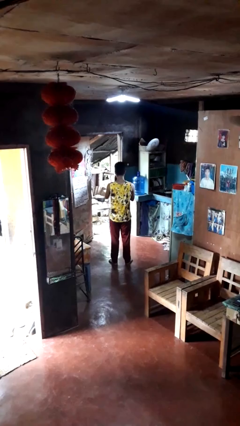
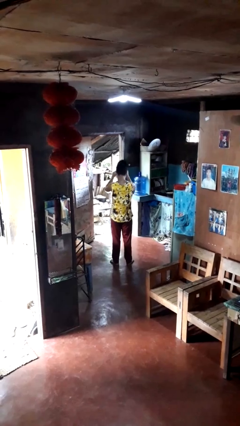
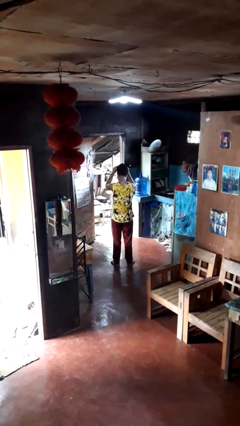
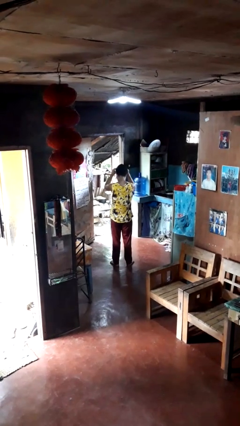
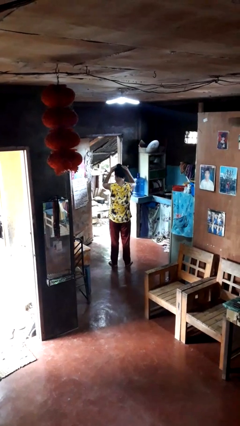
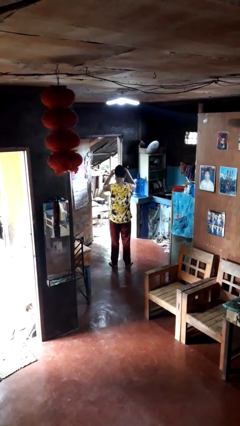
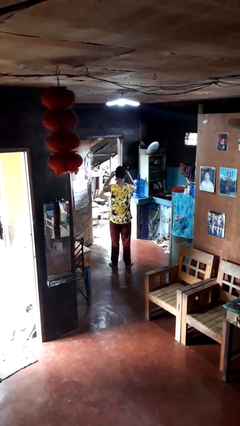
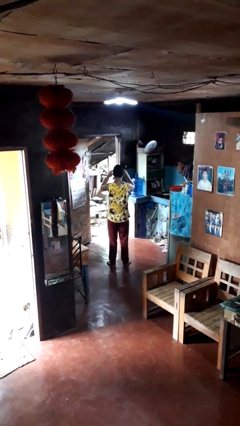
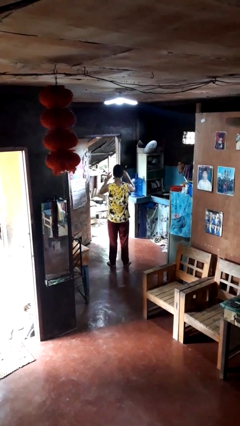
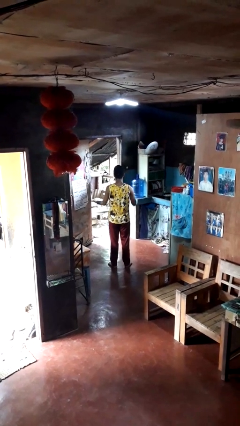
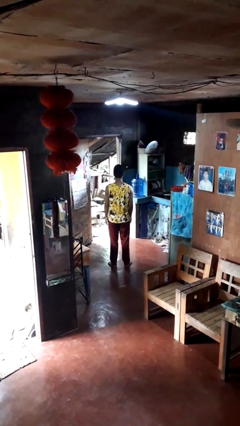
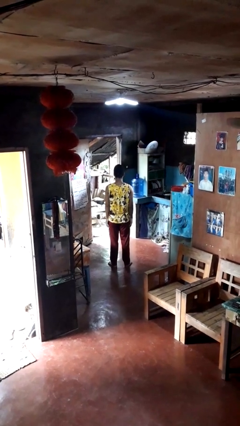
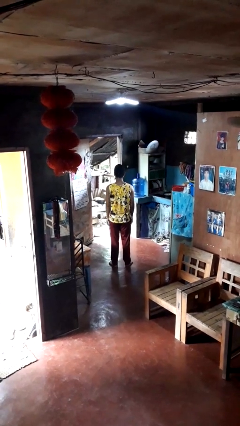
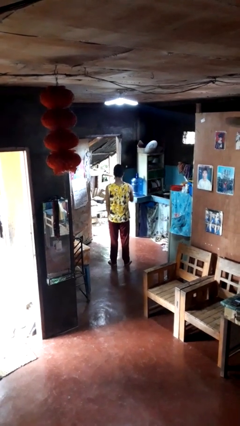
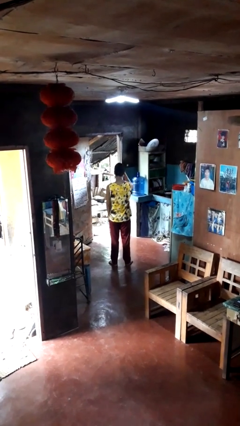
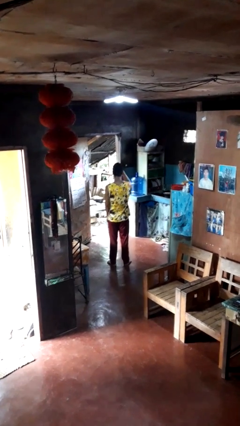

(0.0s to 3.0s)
person puts on hat

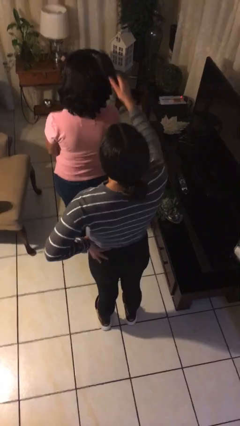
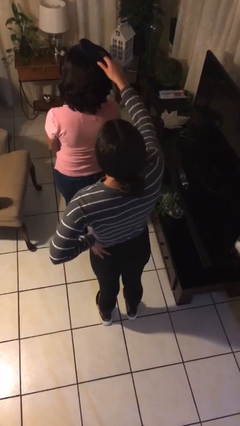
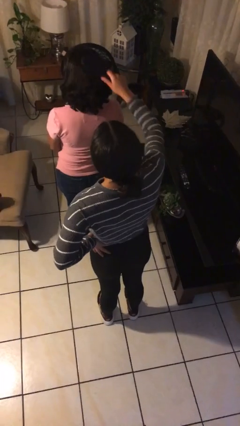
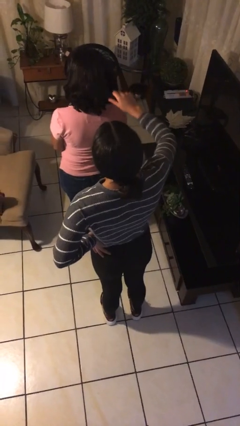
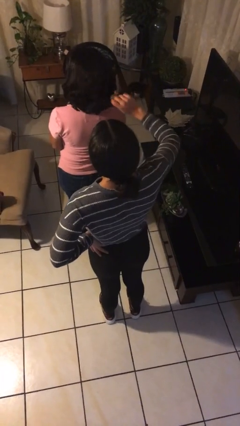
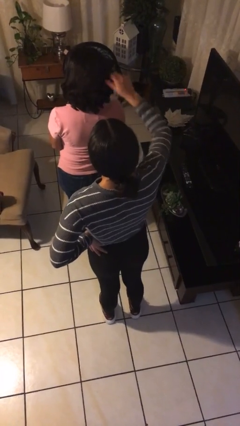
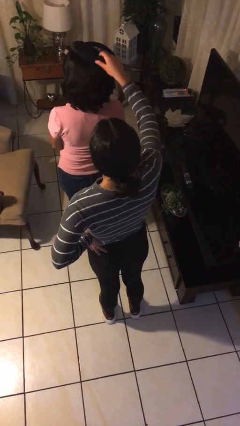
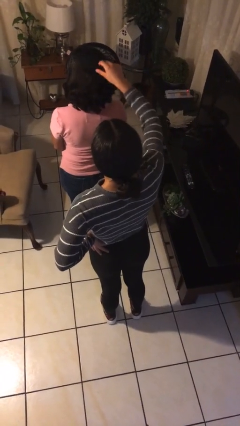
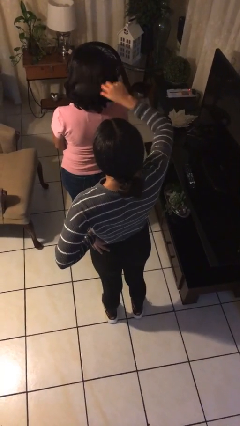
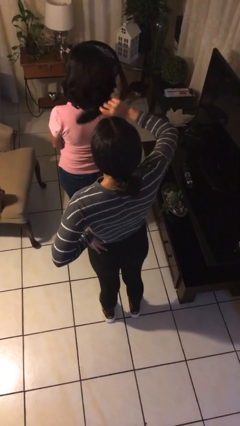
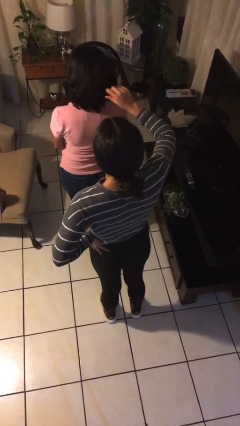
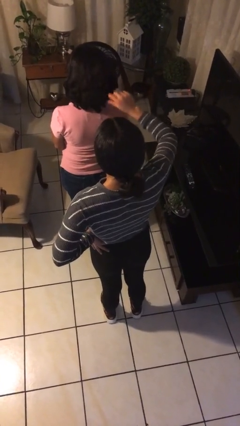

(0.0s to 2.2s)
person brushes hair of person

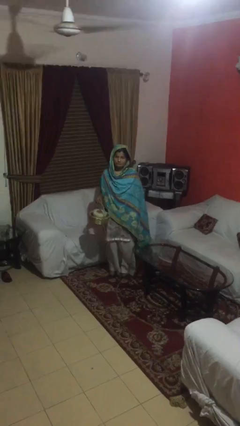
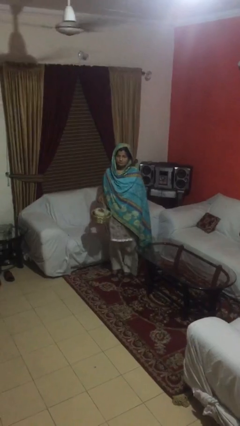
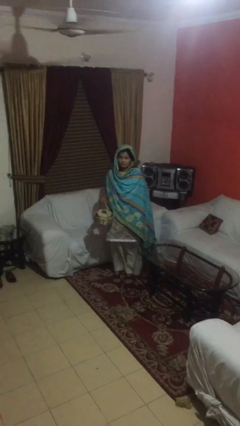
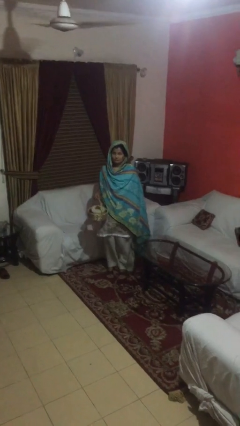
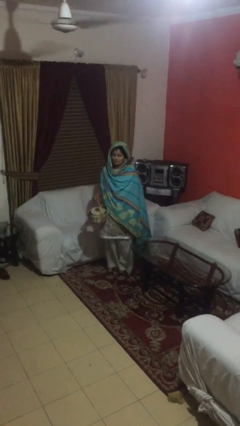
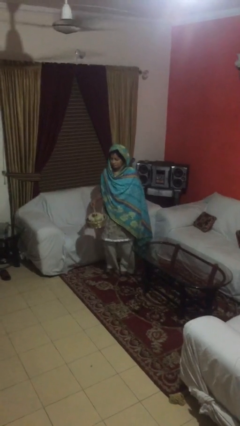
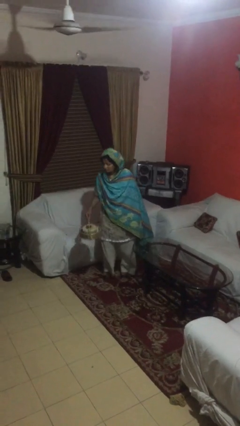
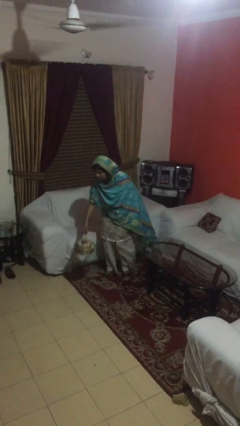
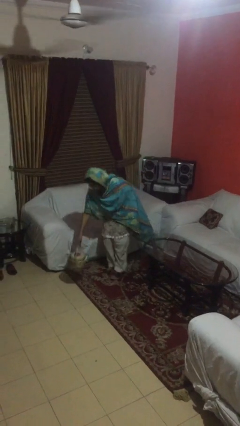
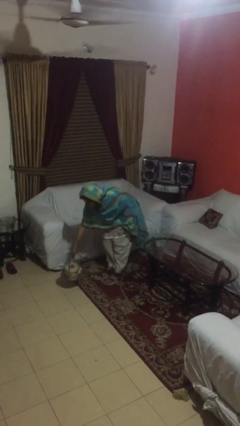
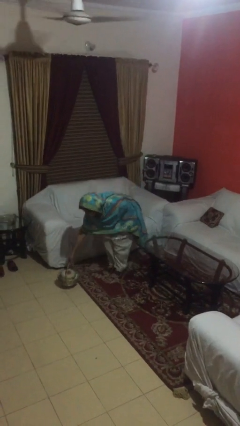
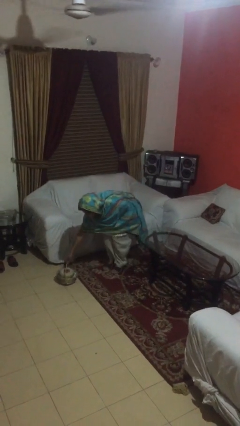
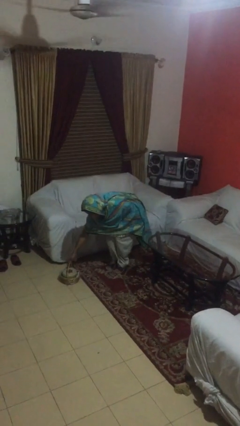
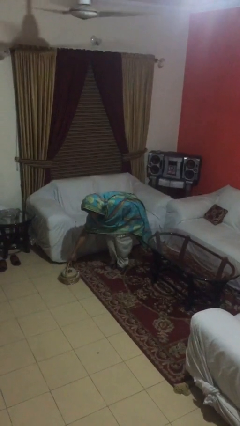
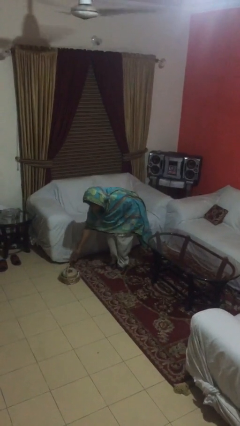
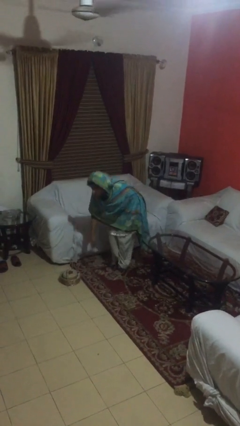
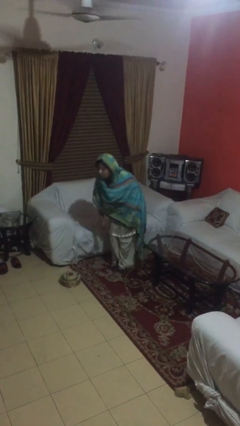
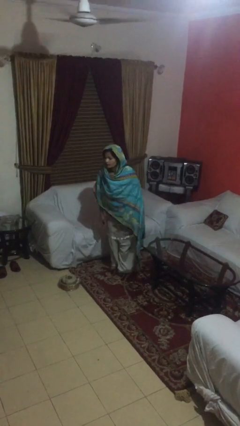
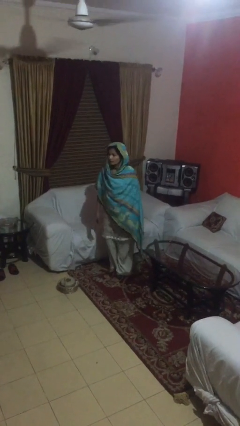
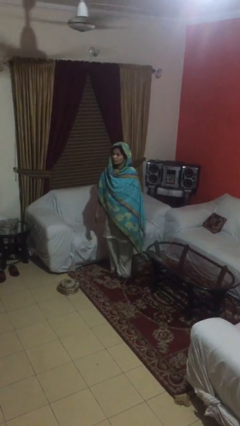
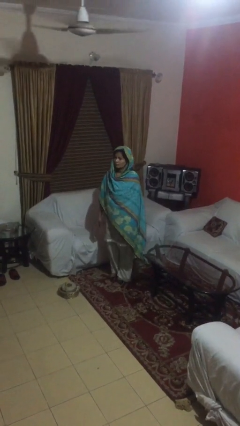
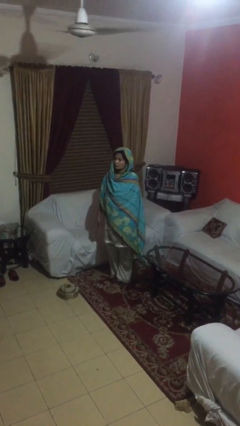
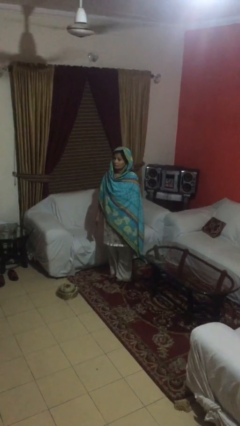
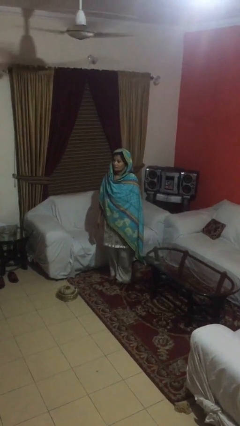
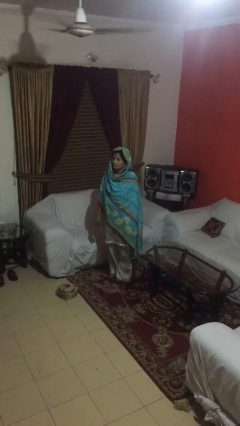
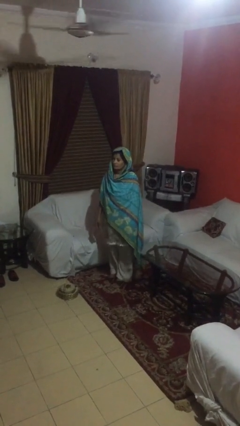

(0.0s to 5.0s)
person puts down object on floor

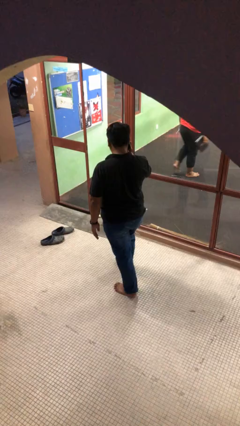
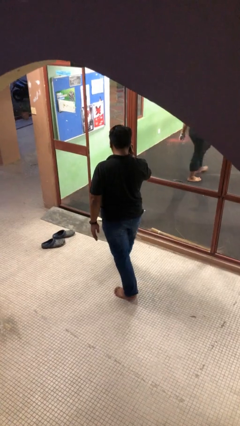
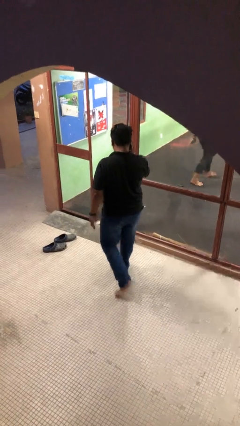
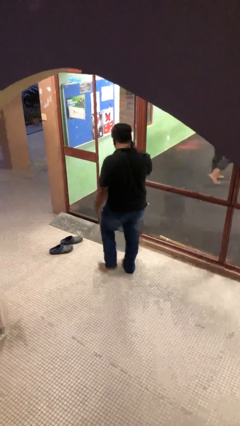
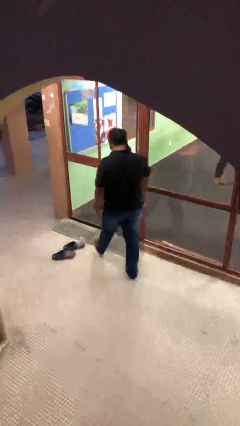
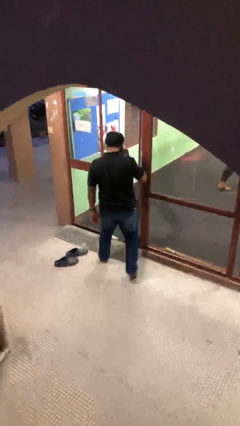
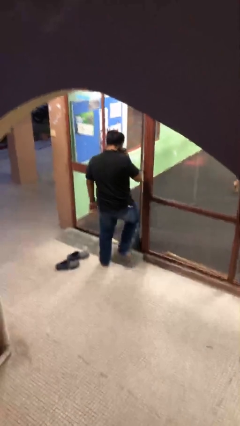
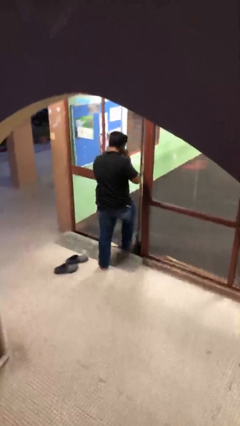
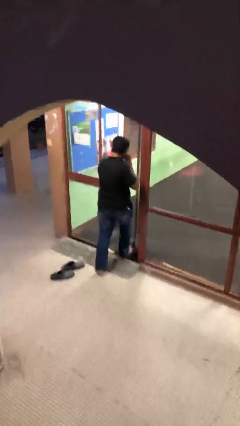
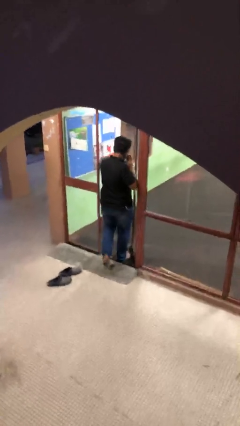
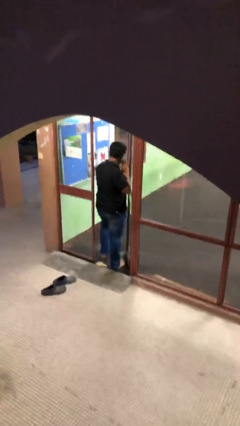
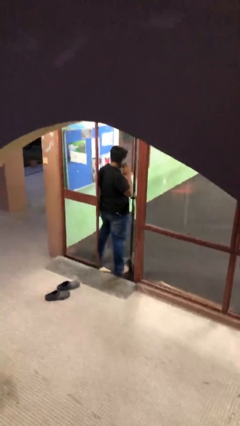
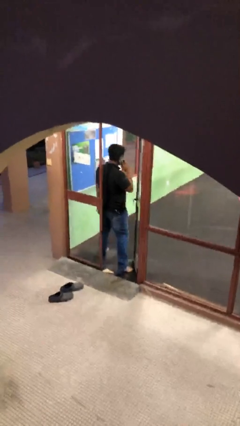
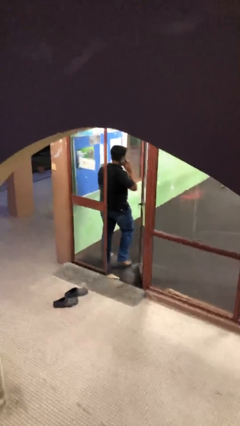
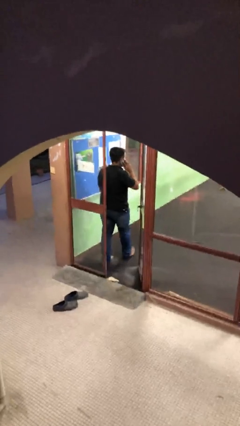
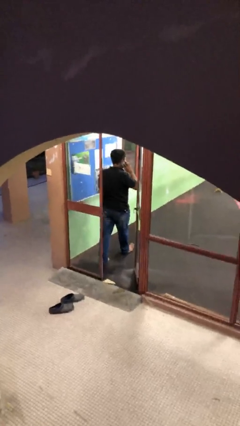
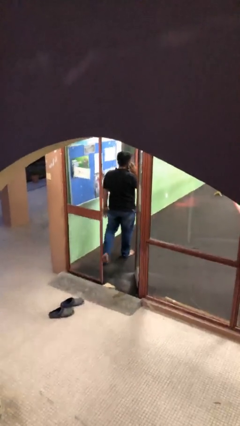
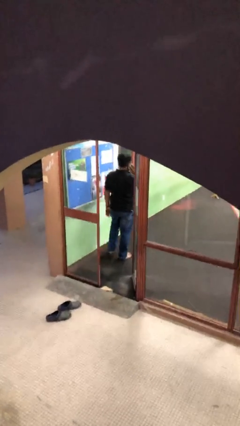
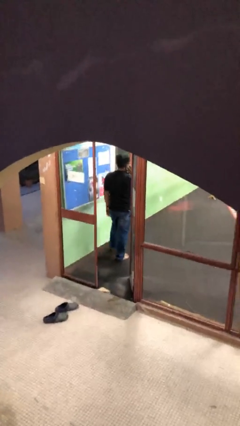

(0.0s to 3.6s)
person enters scene through structure

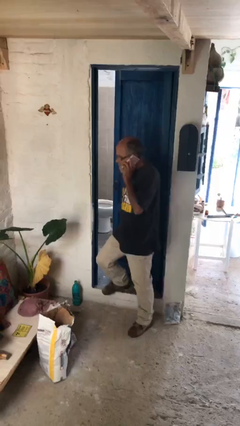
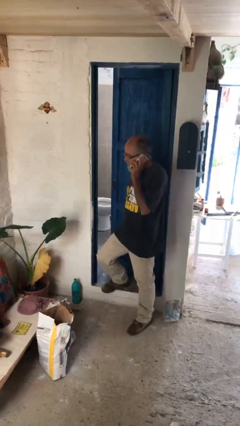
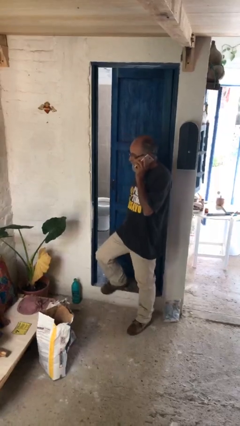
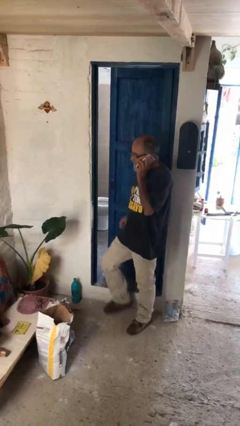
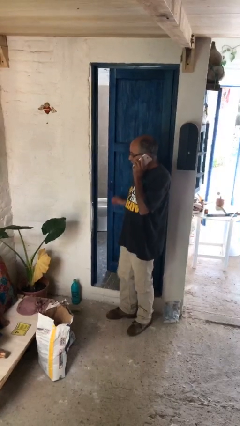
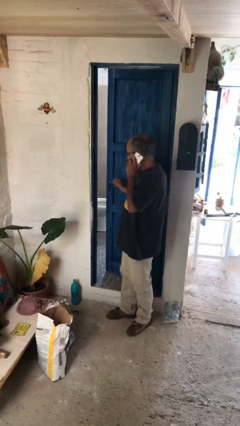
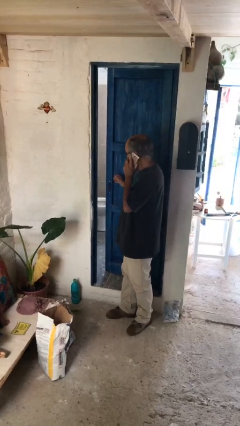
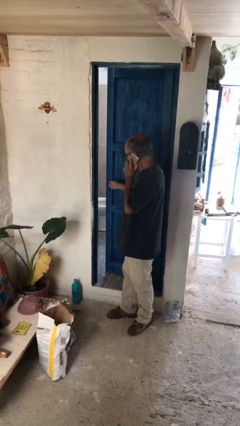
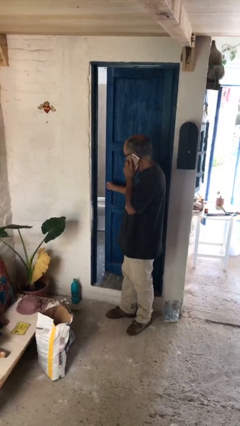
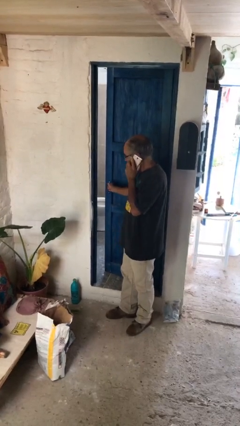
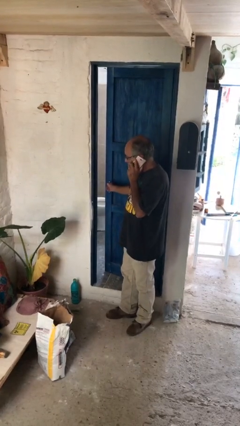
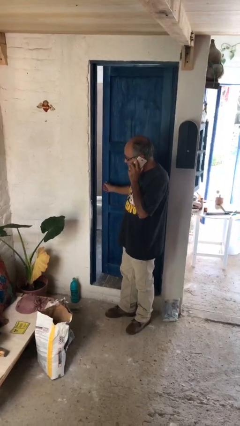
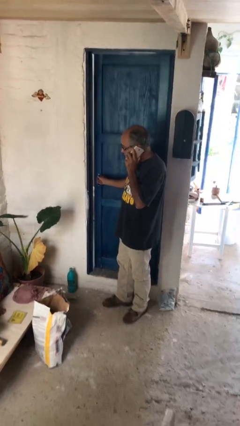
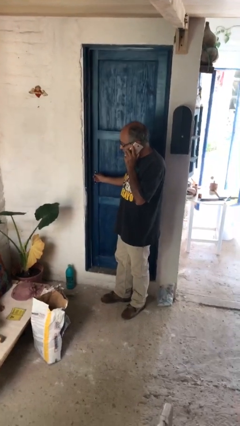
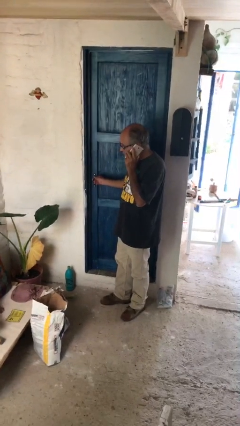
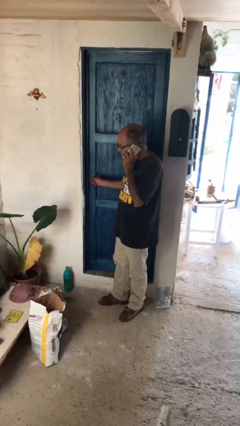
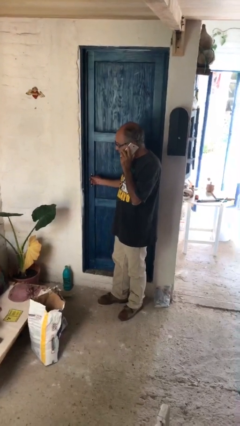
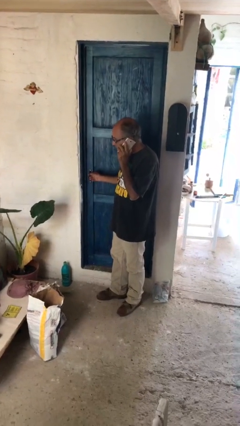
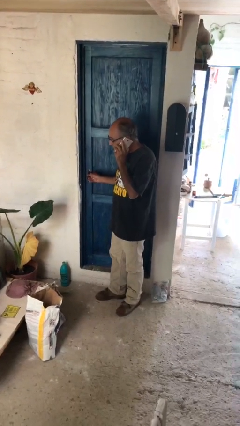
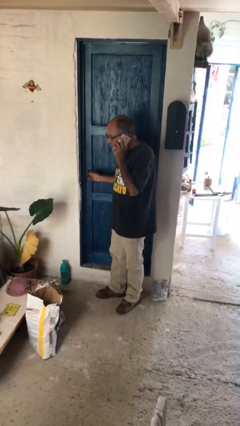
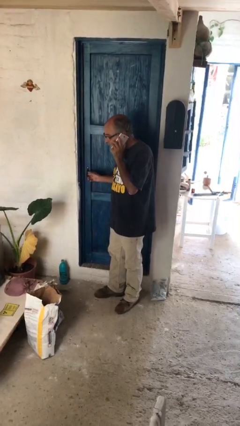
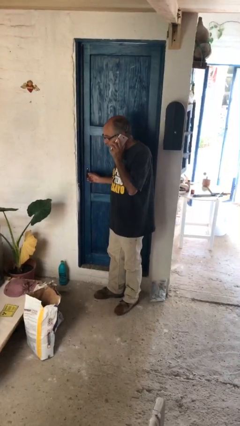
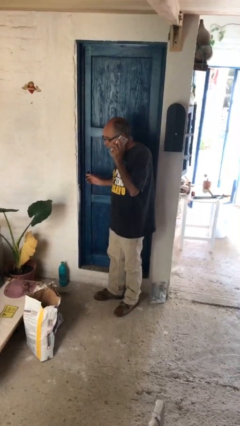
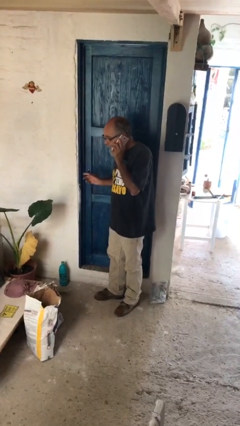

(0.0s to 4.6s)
person closes facility door
